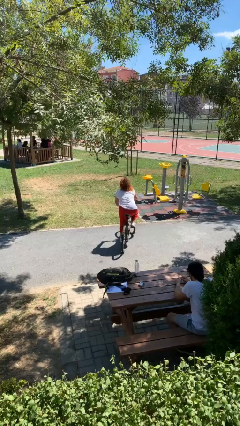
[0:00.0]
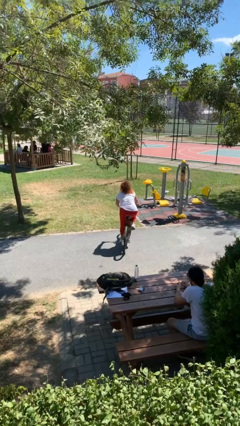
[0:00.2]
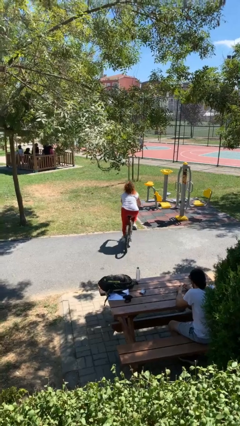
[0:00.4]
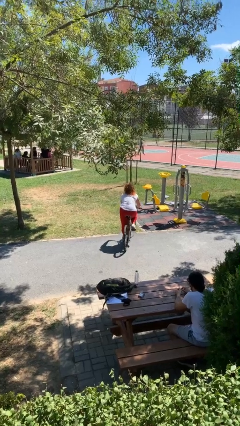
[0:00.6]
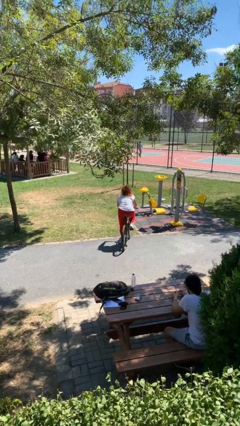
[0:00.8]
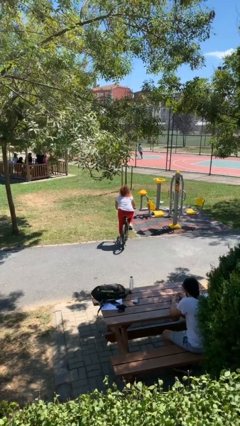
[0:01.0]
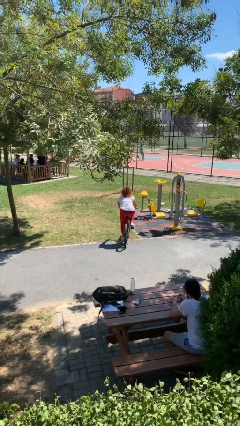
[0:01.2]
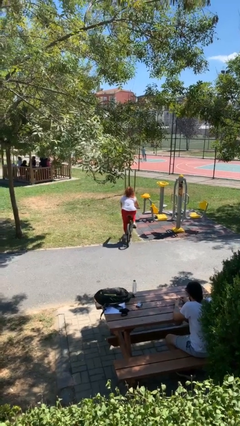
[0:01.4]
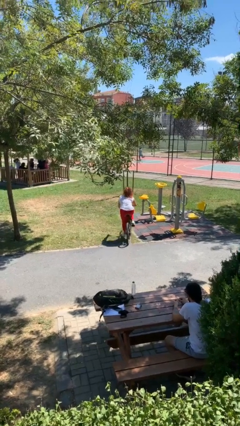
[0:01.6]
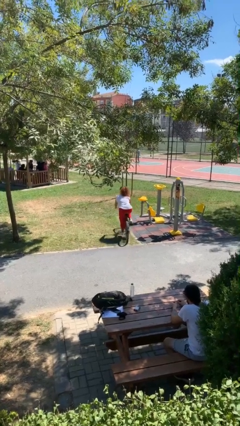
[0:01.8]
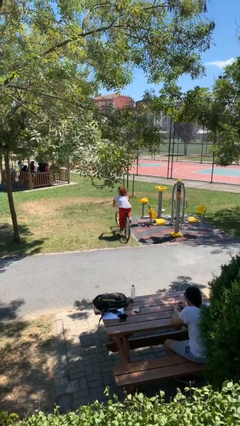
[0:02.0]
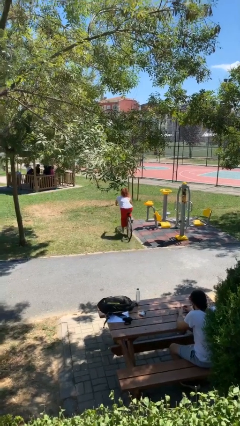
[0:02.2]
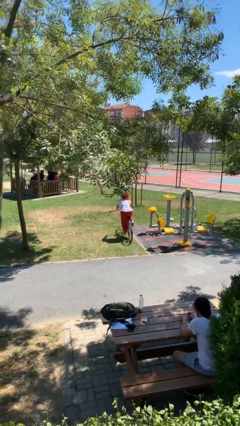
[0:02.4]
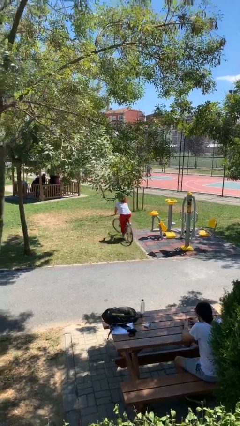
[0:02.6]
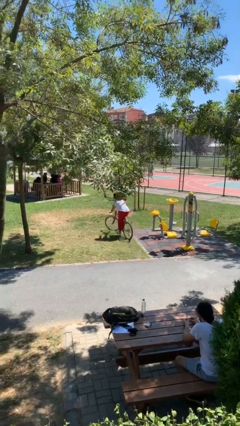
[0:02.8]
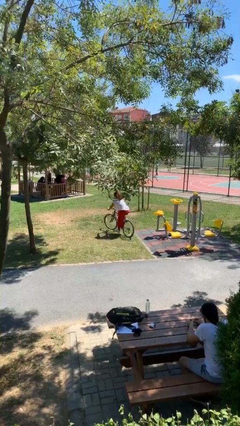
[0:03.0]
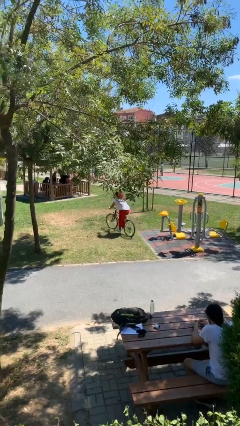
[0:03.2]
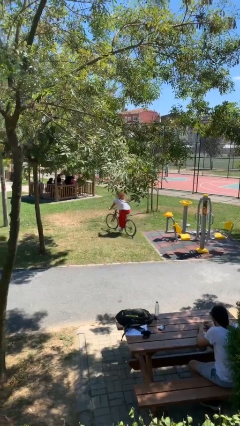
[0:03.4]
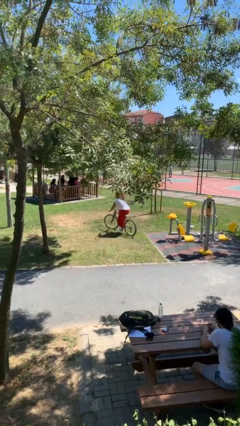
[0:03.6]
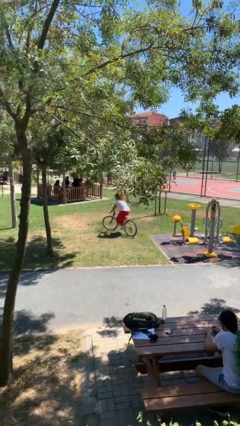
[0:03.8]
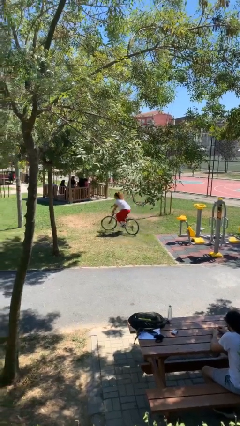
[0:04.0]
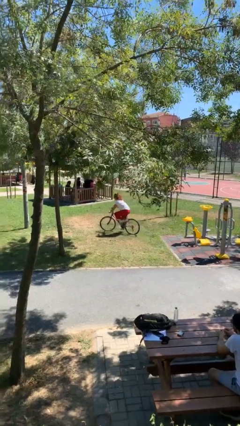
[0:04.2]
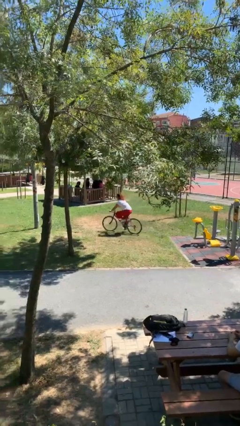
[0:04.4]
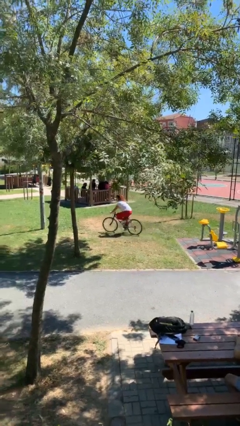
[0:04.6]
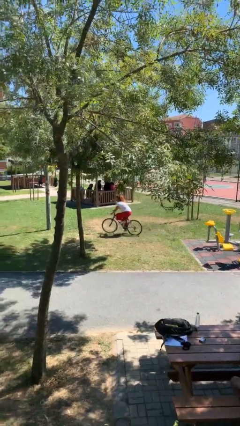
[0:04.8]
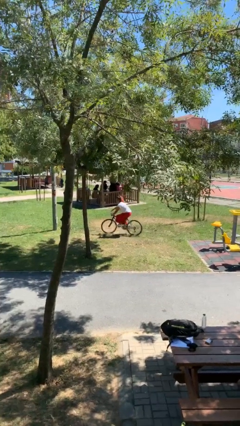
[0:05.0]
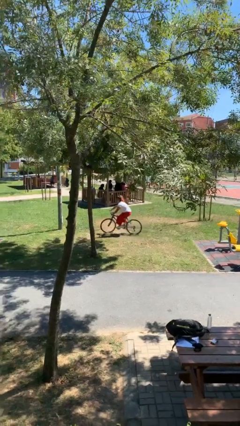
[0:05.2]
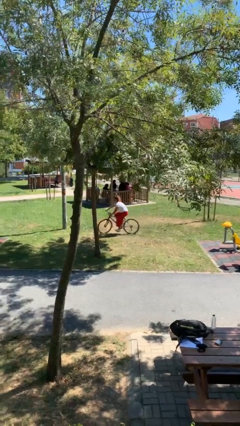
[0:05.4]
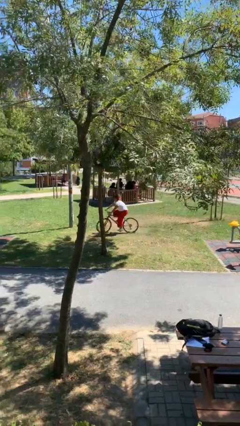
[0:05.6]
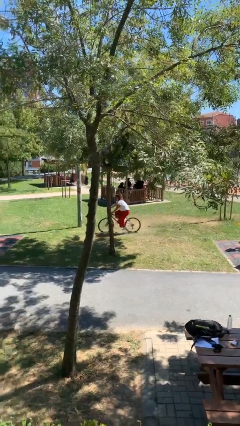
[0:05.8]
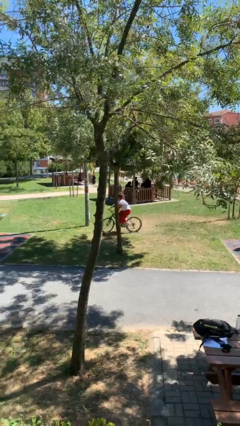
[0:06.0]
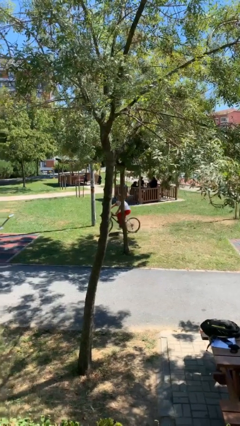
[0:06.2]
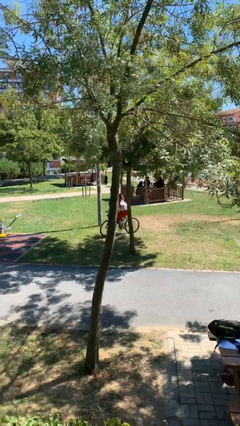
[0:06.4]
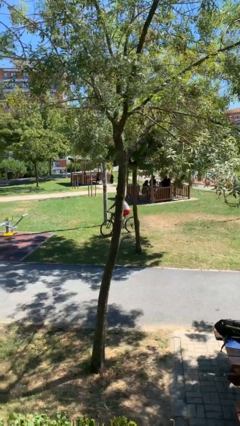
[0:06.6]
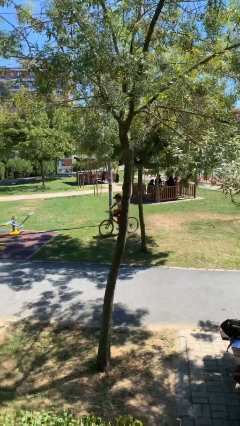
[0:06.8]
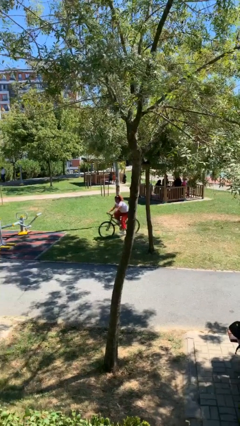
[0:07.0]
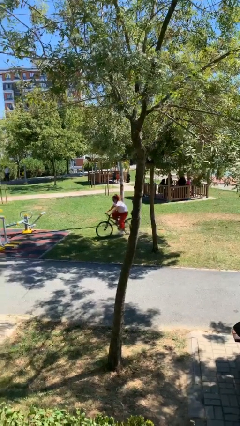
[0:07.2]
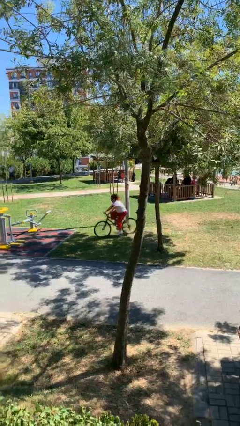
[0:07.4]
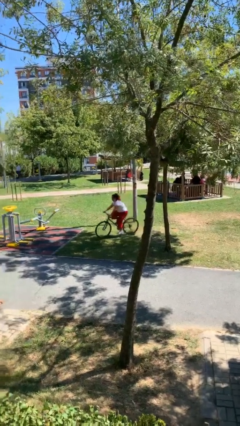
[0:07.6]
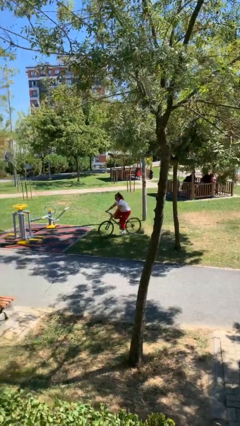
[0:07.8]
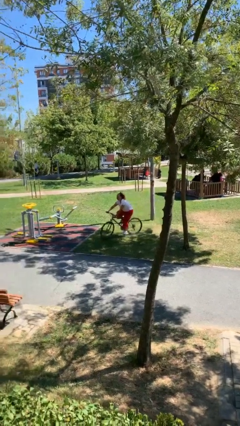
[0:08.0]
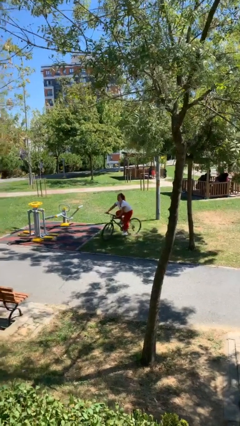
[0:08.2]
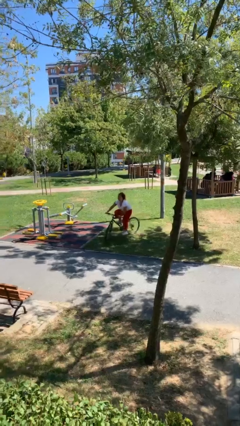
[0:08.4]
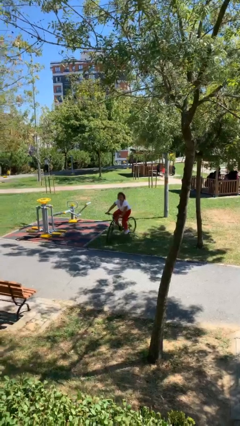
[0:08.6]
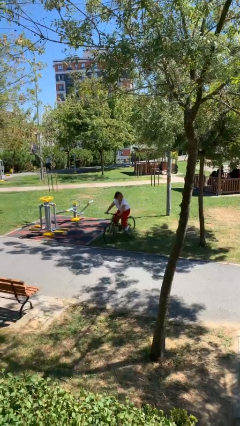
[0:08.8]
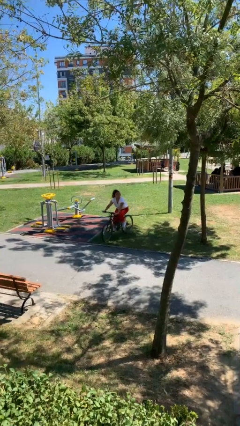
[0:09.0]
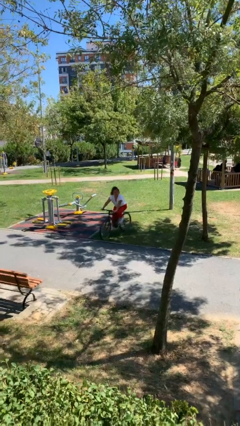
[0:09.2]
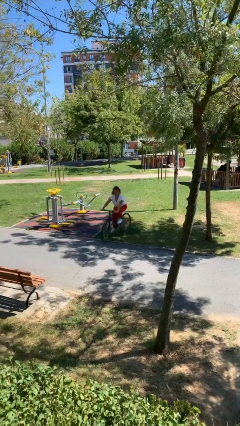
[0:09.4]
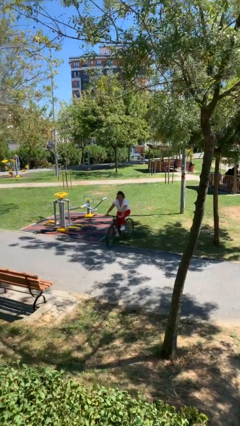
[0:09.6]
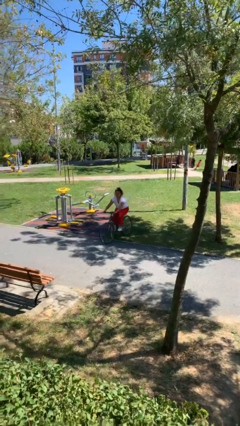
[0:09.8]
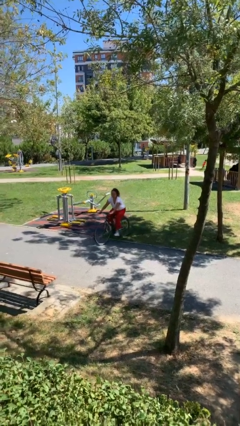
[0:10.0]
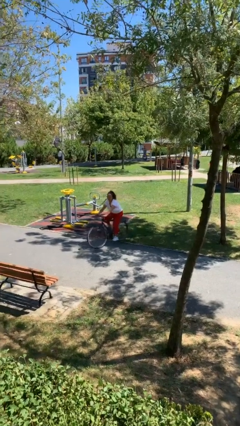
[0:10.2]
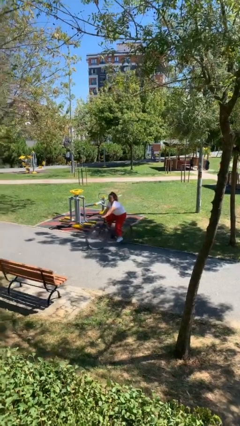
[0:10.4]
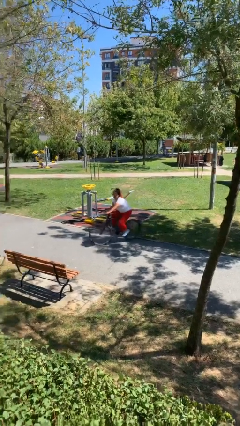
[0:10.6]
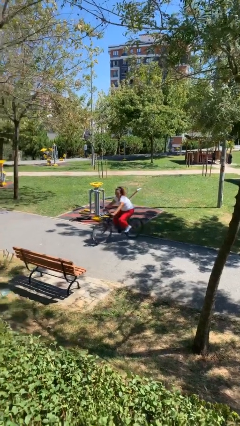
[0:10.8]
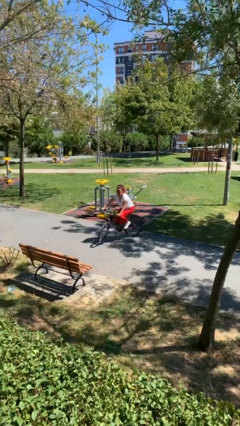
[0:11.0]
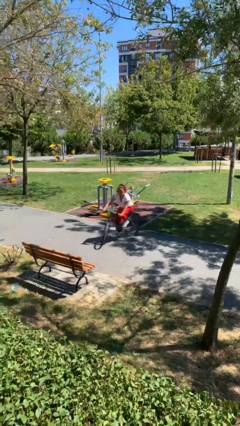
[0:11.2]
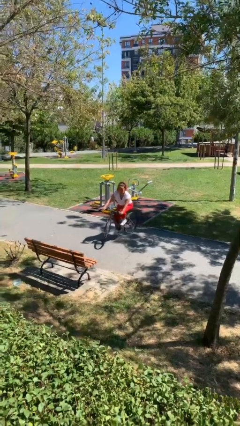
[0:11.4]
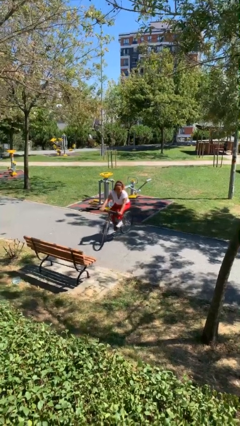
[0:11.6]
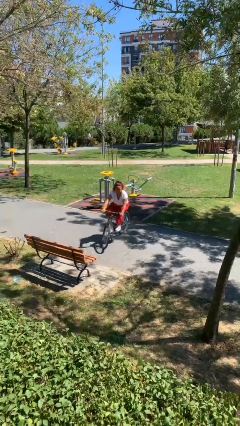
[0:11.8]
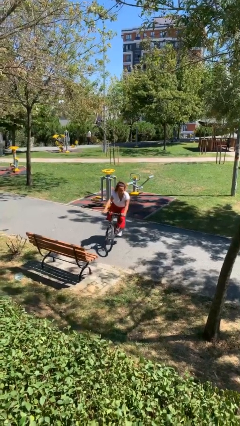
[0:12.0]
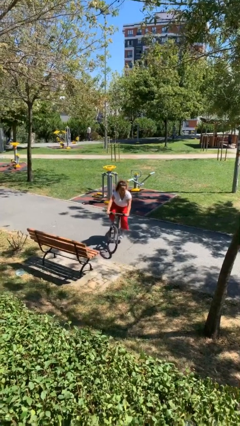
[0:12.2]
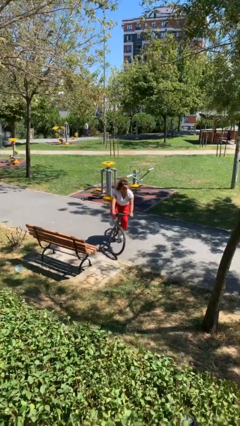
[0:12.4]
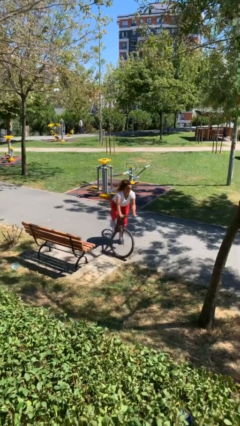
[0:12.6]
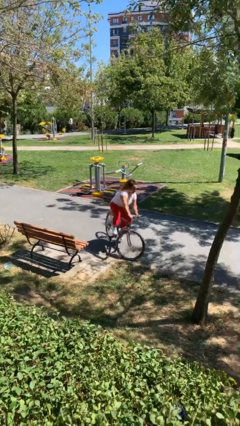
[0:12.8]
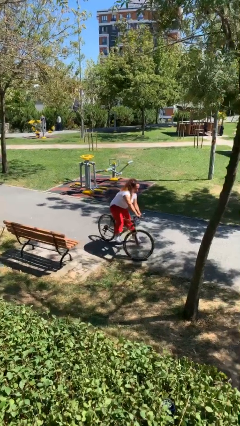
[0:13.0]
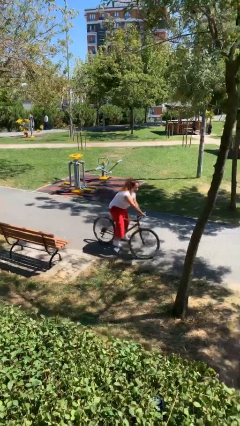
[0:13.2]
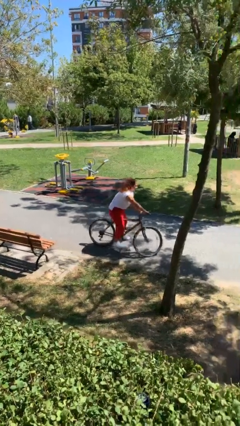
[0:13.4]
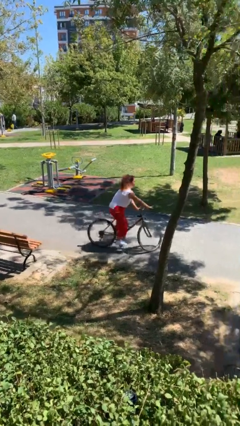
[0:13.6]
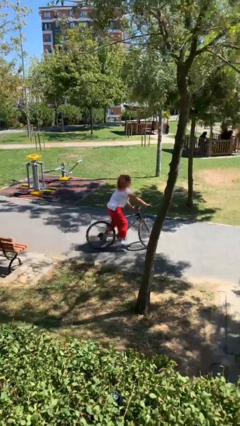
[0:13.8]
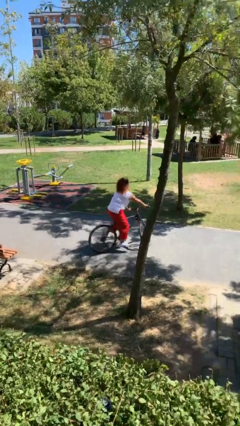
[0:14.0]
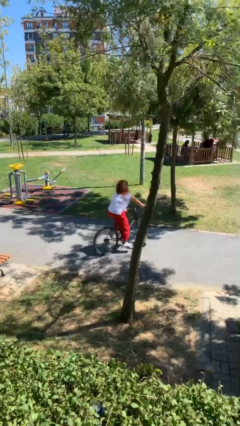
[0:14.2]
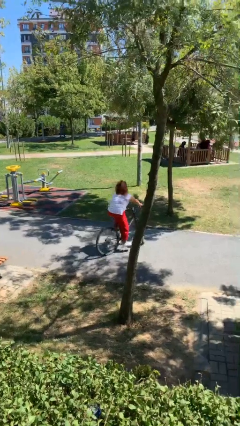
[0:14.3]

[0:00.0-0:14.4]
person rides bicycle

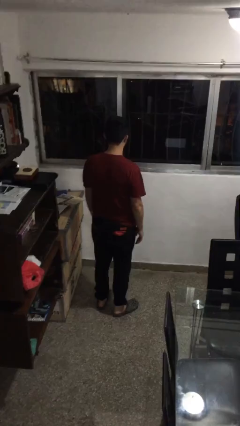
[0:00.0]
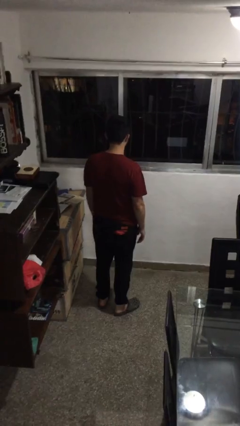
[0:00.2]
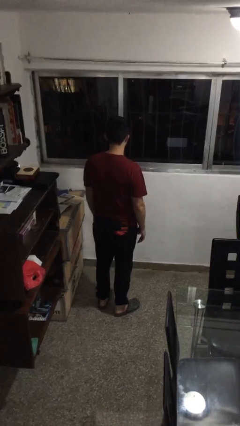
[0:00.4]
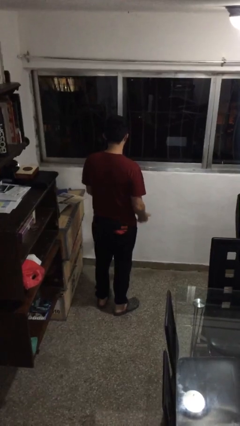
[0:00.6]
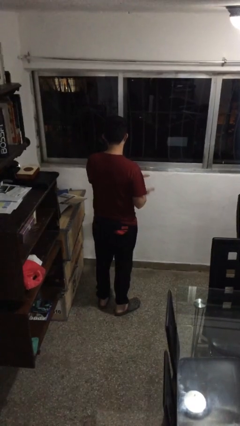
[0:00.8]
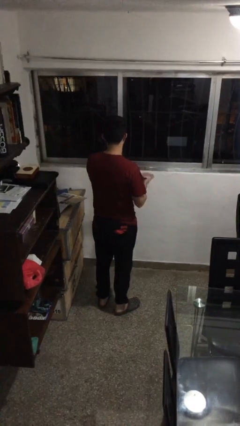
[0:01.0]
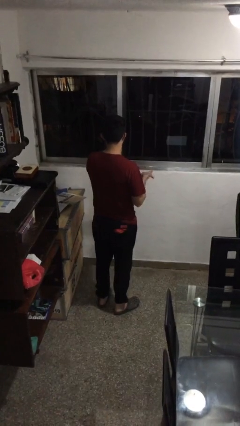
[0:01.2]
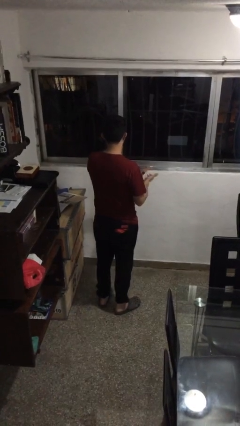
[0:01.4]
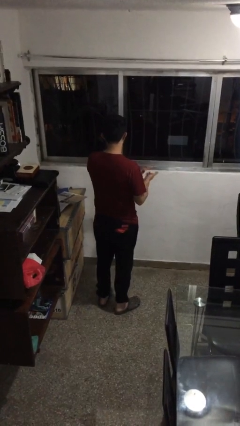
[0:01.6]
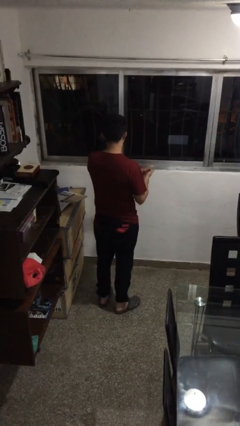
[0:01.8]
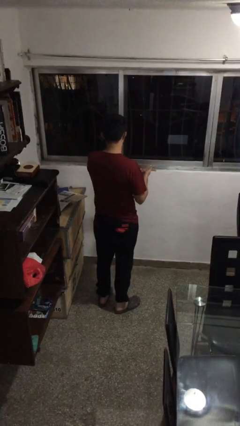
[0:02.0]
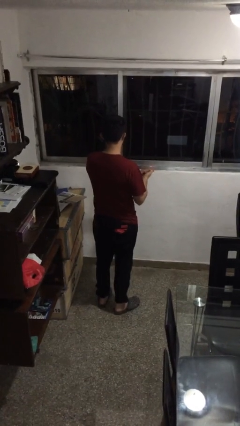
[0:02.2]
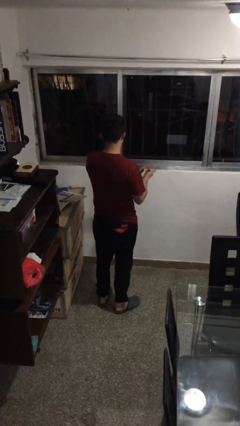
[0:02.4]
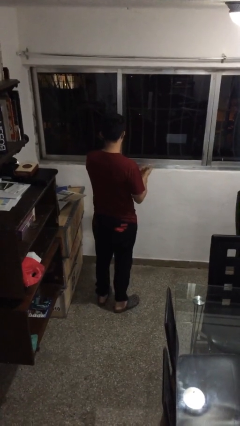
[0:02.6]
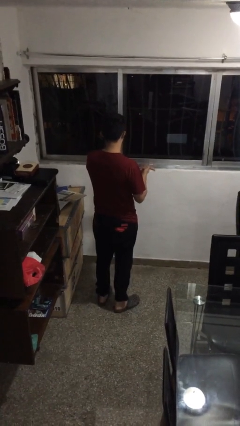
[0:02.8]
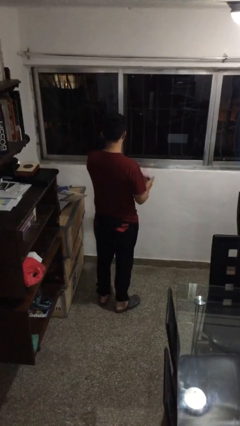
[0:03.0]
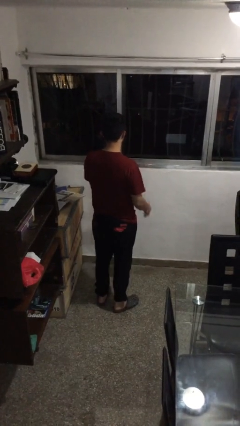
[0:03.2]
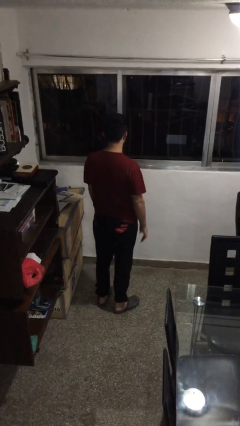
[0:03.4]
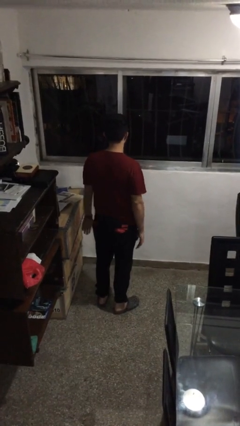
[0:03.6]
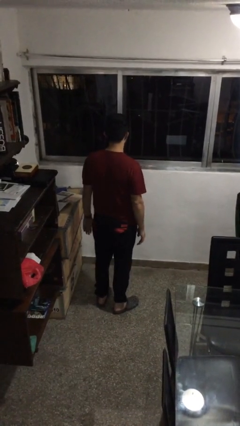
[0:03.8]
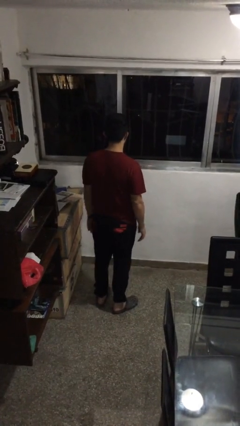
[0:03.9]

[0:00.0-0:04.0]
person claps hands
